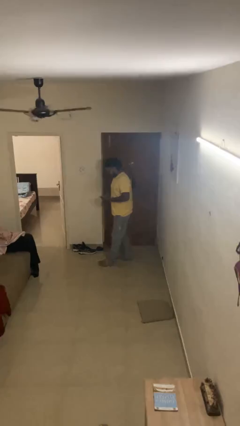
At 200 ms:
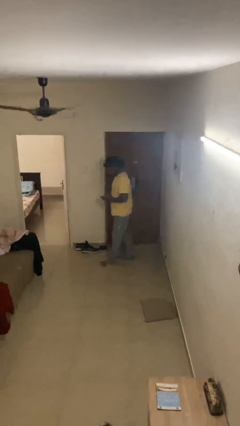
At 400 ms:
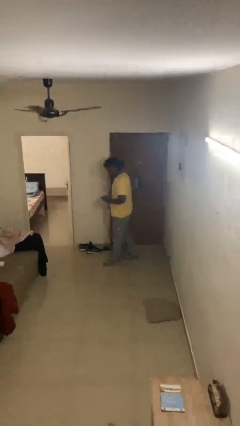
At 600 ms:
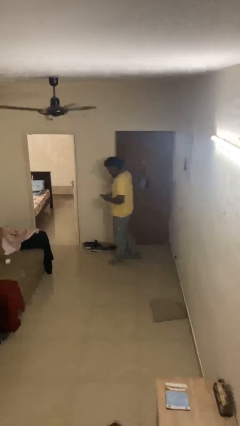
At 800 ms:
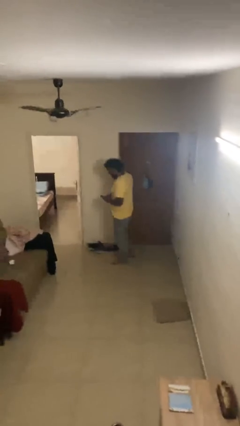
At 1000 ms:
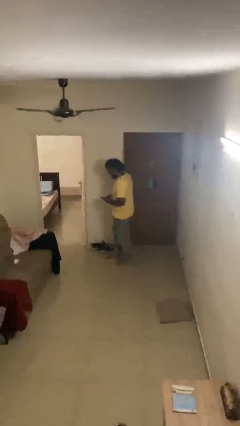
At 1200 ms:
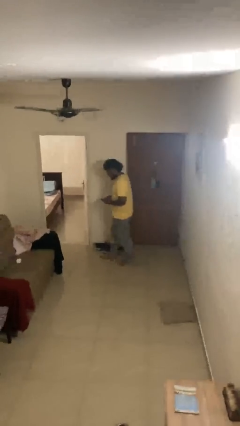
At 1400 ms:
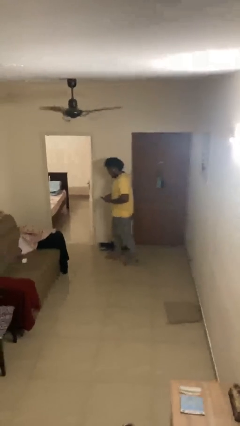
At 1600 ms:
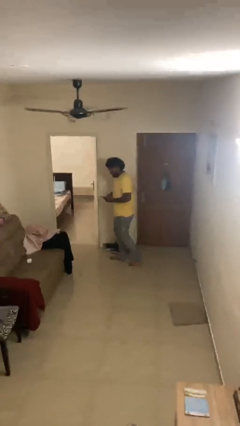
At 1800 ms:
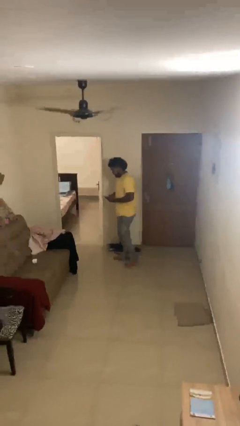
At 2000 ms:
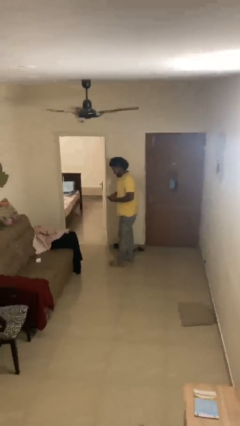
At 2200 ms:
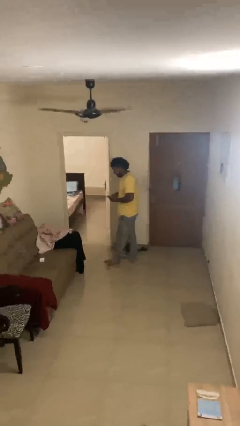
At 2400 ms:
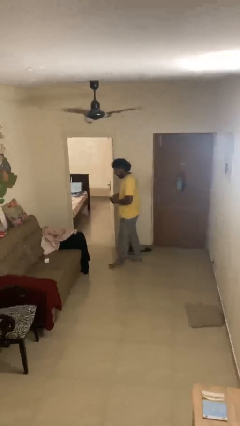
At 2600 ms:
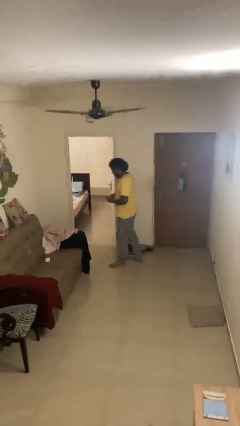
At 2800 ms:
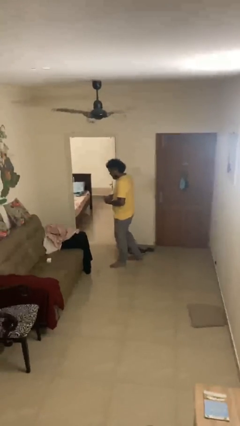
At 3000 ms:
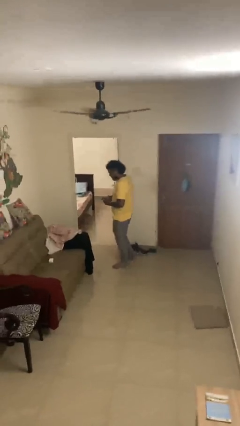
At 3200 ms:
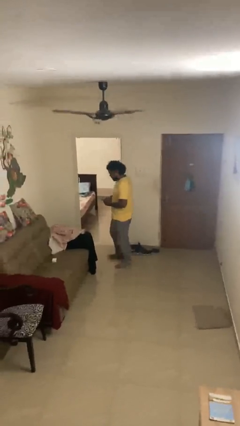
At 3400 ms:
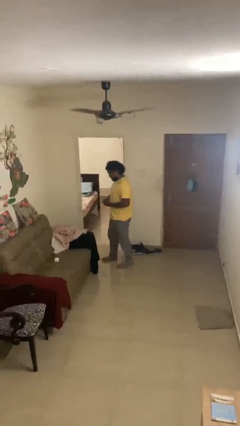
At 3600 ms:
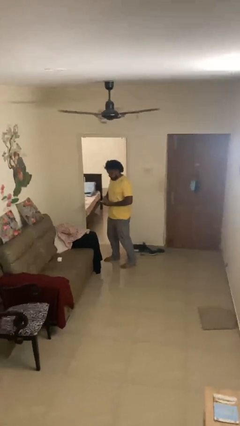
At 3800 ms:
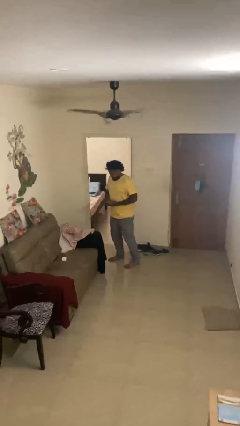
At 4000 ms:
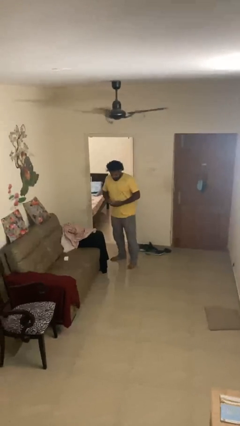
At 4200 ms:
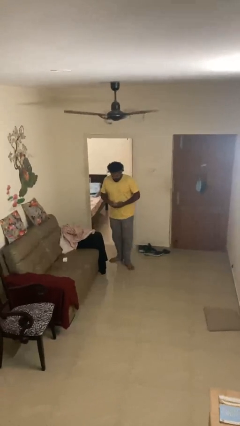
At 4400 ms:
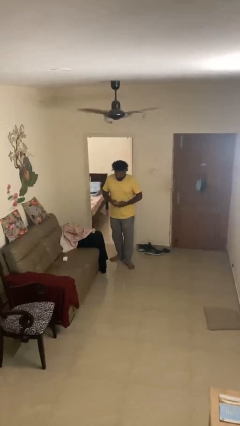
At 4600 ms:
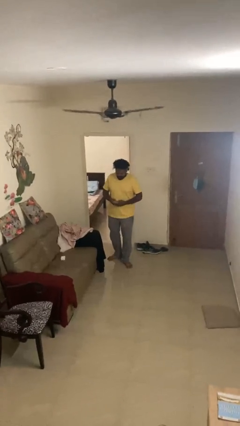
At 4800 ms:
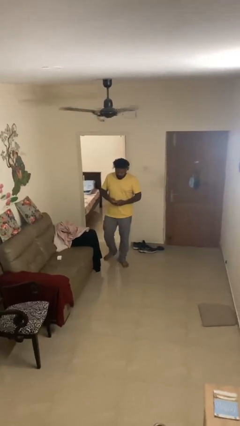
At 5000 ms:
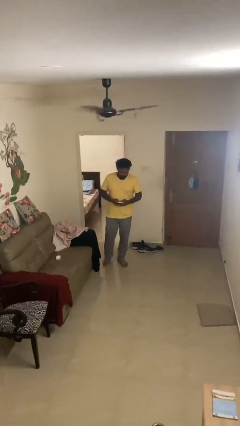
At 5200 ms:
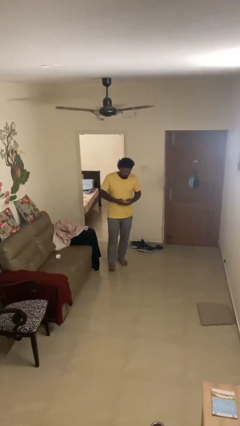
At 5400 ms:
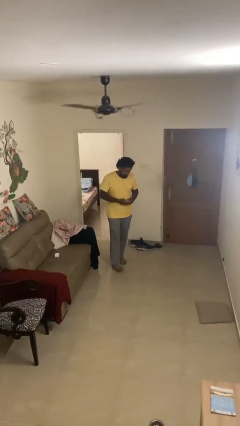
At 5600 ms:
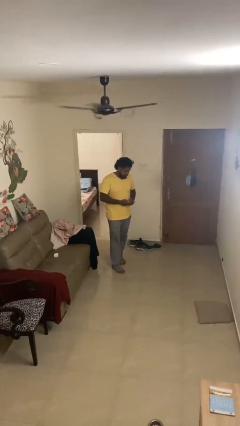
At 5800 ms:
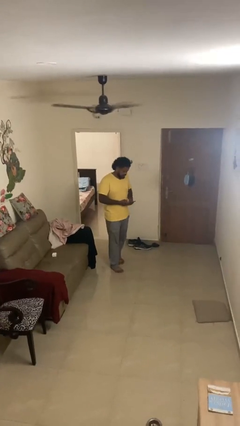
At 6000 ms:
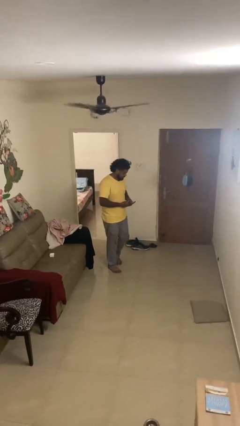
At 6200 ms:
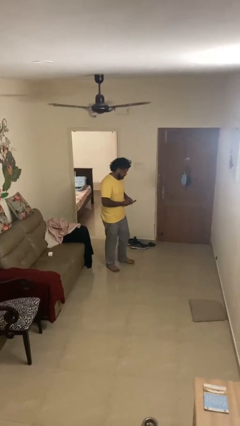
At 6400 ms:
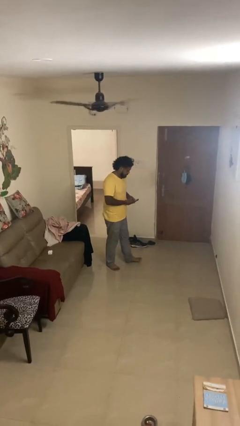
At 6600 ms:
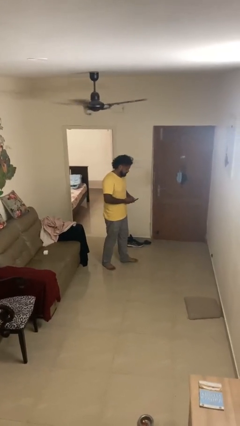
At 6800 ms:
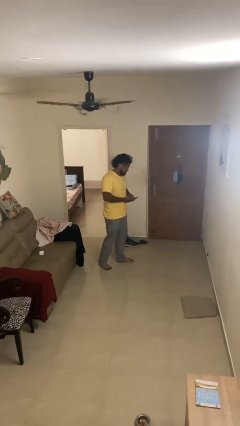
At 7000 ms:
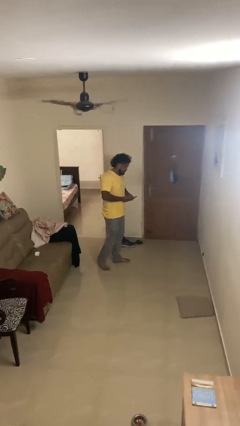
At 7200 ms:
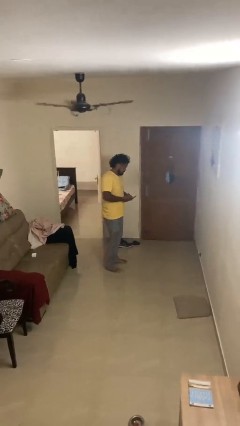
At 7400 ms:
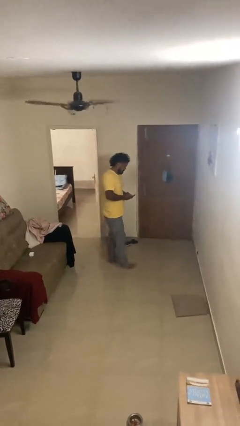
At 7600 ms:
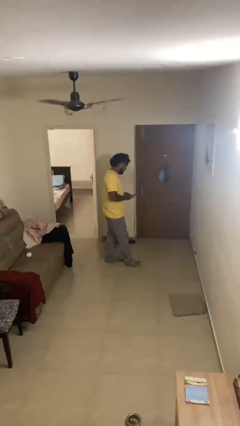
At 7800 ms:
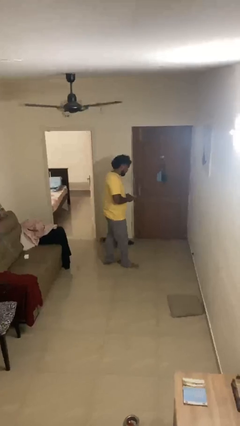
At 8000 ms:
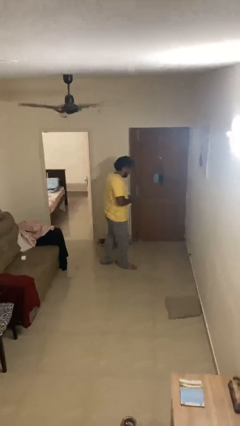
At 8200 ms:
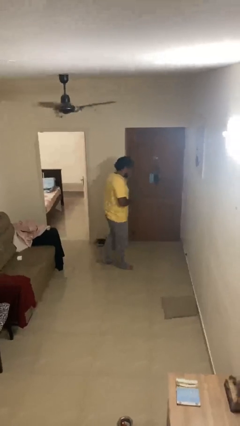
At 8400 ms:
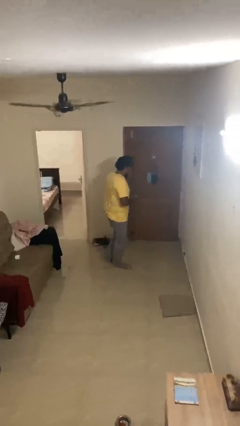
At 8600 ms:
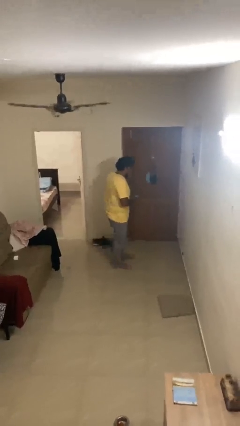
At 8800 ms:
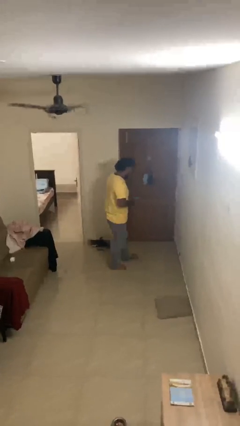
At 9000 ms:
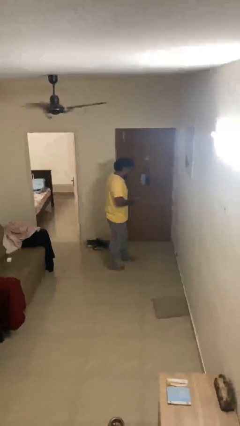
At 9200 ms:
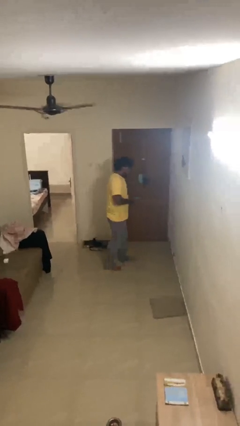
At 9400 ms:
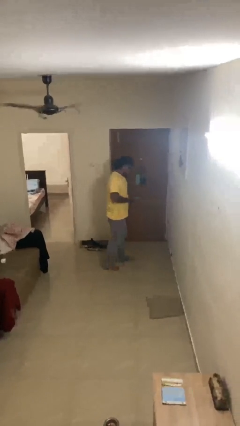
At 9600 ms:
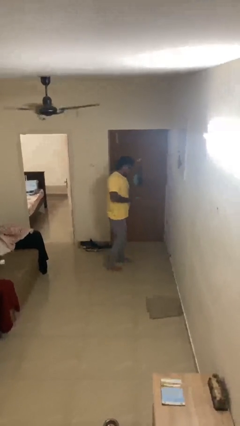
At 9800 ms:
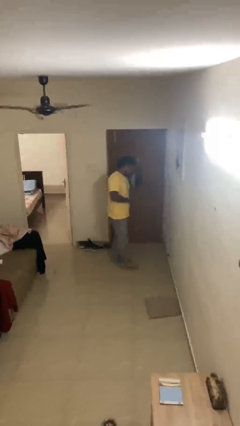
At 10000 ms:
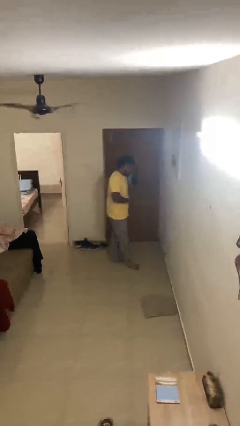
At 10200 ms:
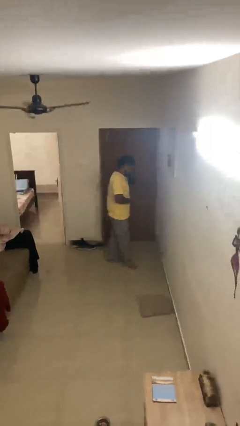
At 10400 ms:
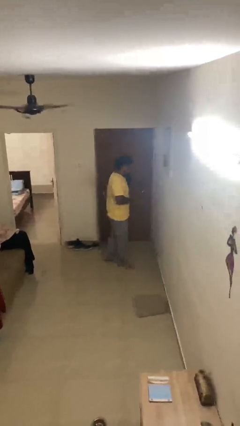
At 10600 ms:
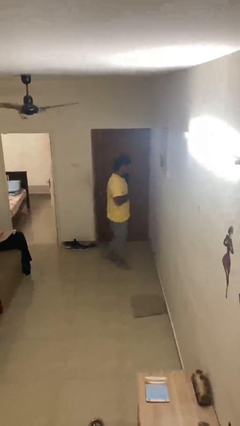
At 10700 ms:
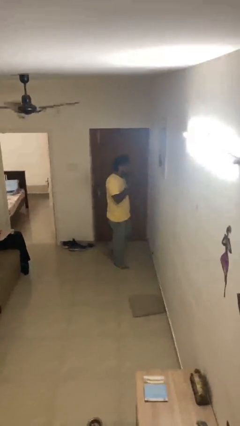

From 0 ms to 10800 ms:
person texts on phone

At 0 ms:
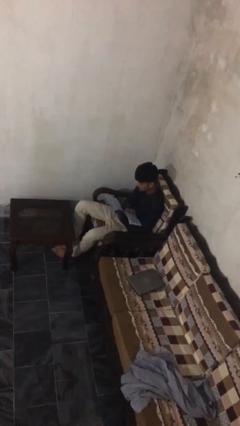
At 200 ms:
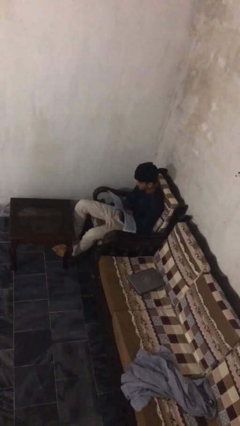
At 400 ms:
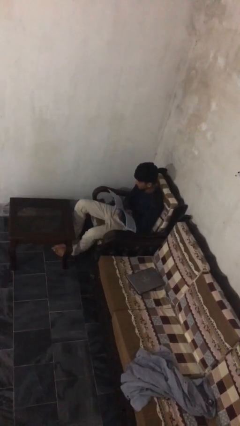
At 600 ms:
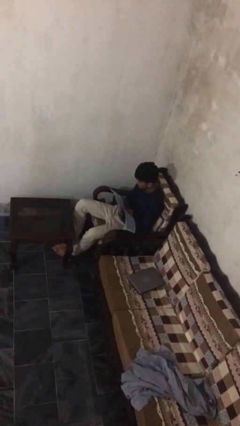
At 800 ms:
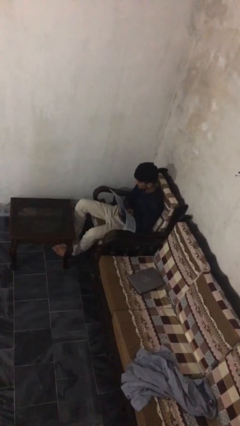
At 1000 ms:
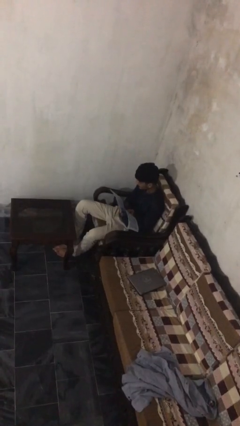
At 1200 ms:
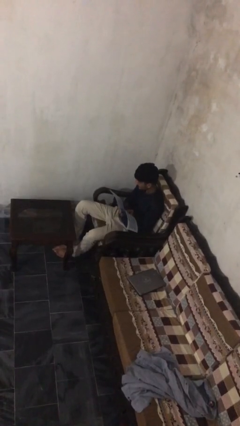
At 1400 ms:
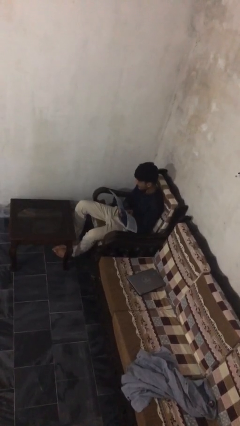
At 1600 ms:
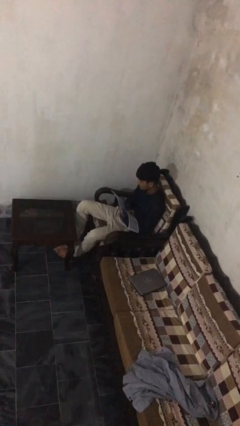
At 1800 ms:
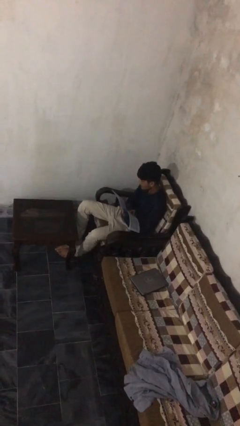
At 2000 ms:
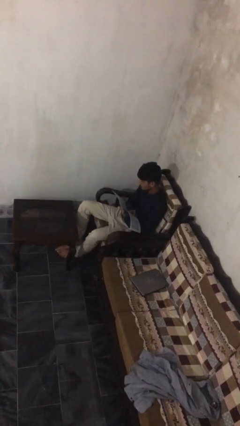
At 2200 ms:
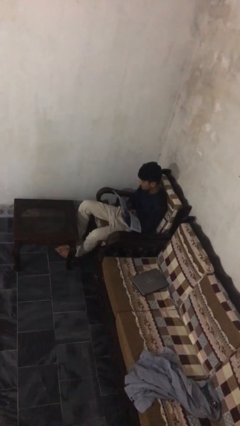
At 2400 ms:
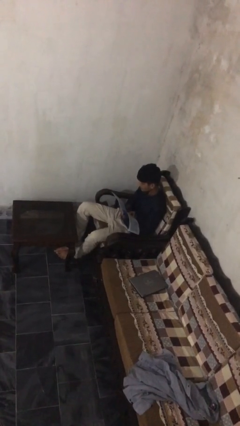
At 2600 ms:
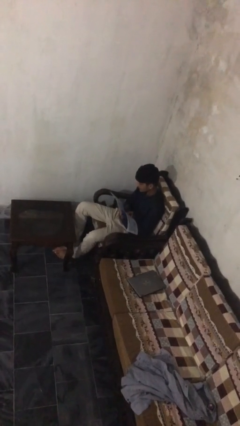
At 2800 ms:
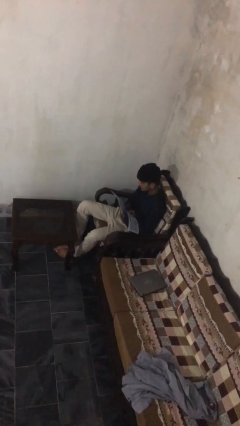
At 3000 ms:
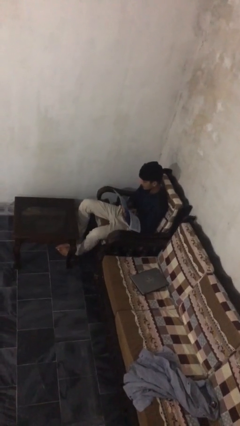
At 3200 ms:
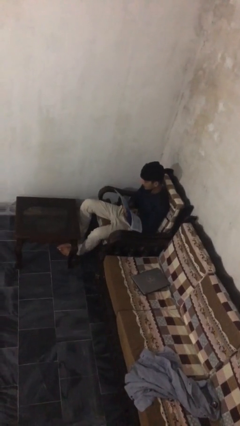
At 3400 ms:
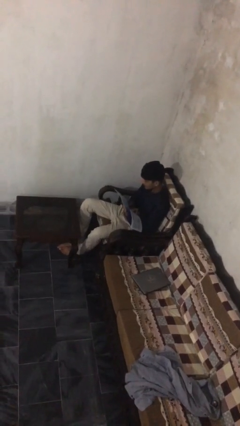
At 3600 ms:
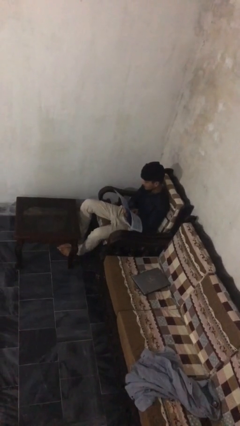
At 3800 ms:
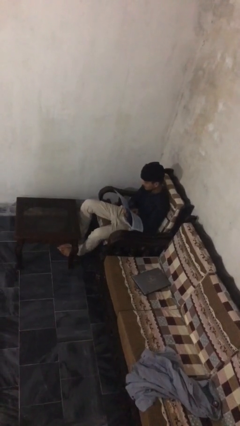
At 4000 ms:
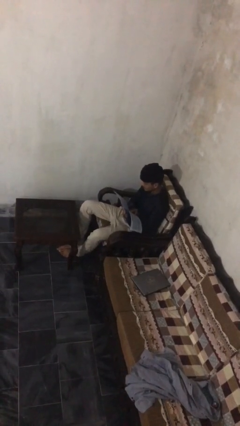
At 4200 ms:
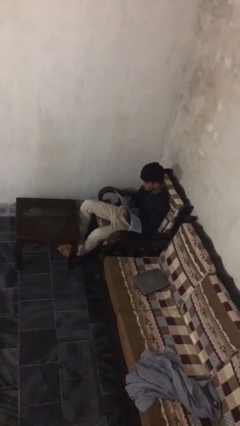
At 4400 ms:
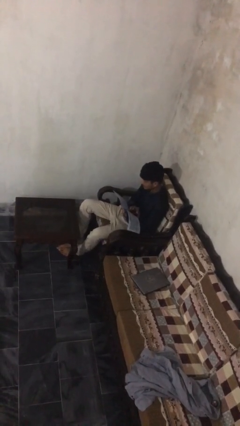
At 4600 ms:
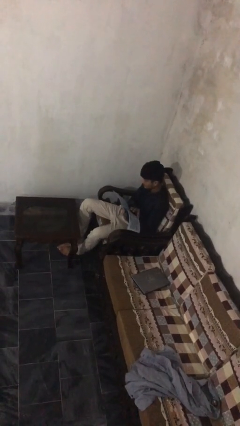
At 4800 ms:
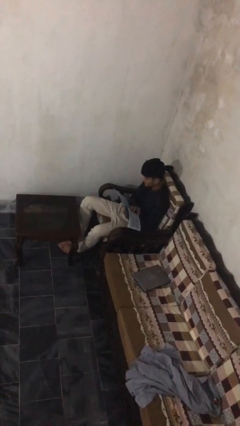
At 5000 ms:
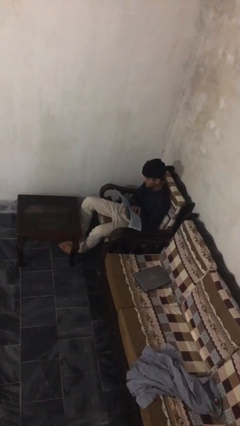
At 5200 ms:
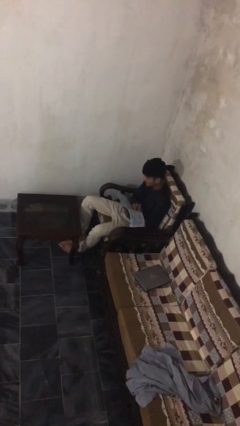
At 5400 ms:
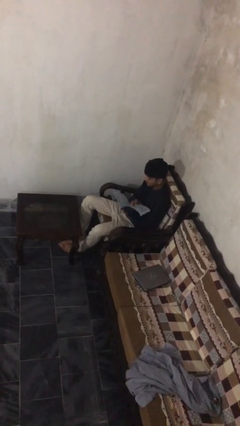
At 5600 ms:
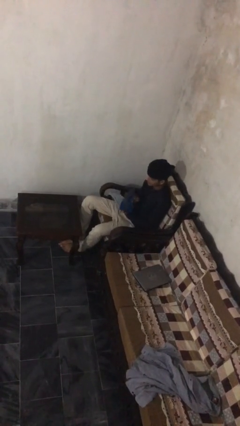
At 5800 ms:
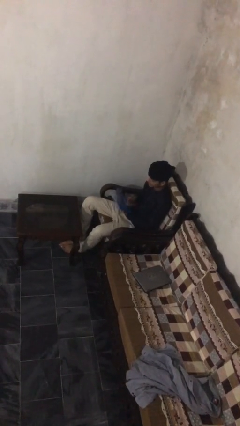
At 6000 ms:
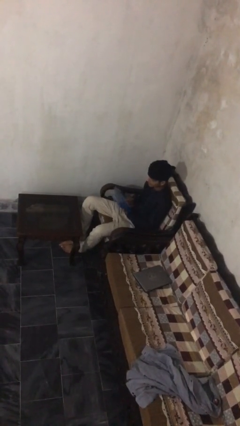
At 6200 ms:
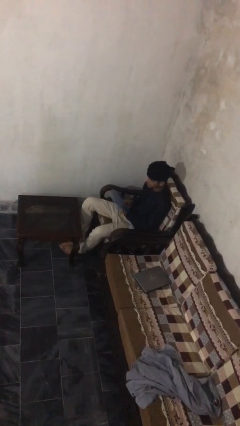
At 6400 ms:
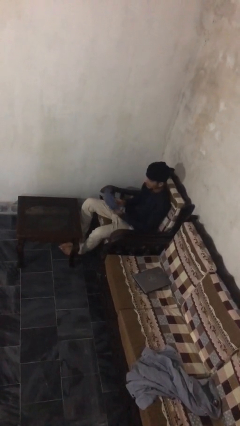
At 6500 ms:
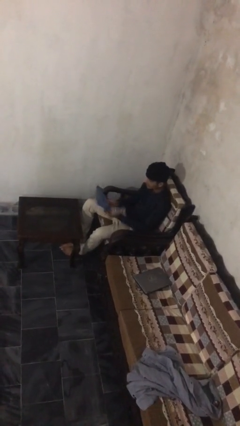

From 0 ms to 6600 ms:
person reads document

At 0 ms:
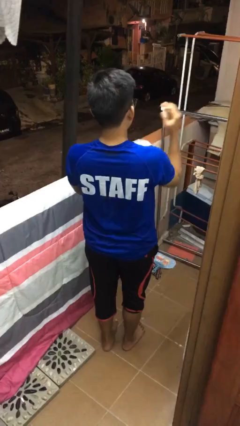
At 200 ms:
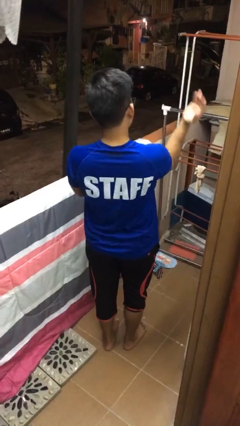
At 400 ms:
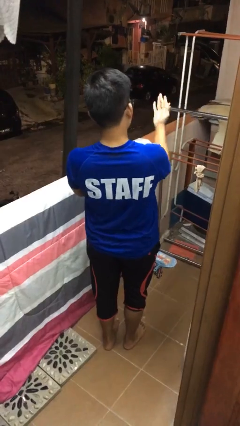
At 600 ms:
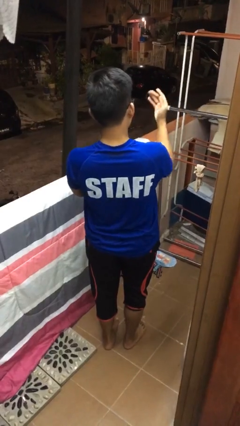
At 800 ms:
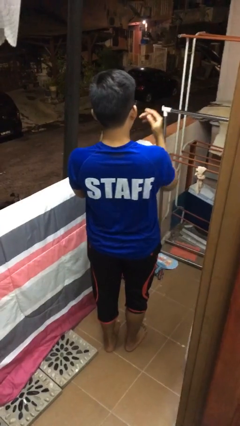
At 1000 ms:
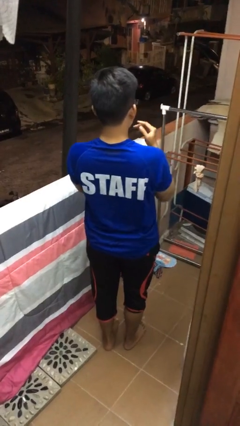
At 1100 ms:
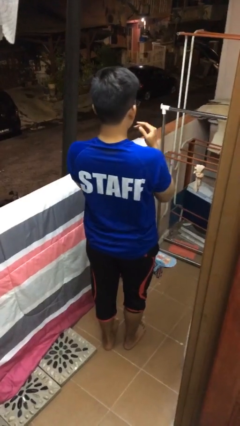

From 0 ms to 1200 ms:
person karate chop
